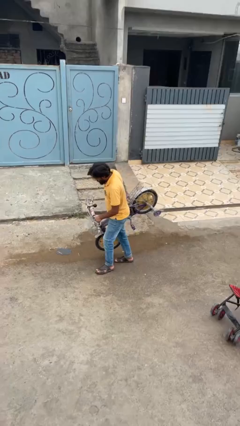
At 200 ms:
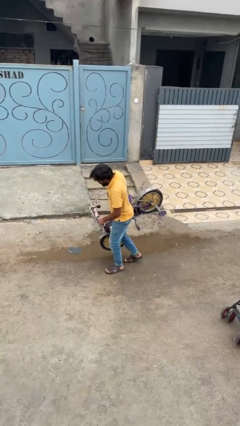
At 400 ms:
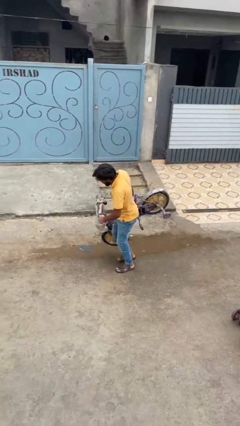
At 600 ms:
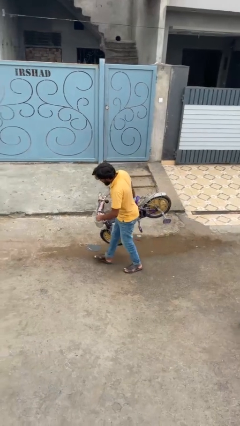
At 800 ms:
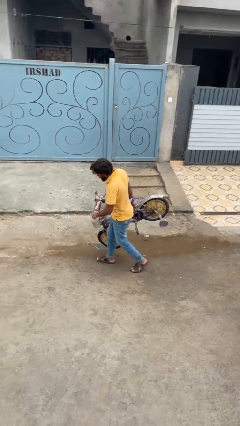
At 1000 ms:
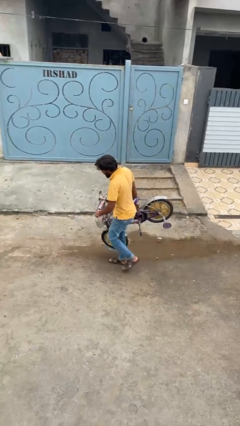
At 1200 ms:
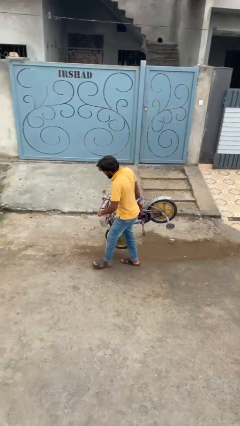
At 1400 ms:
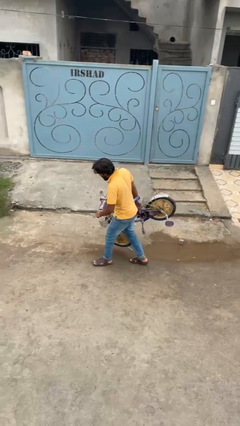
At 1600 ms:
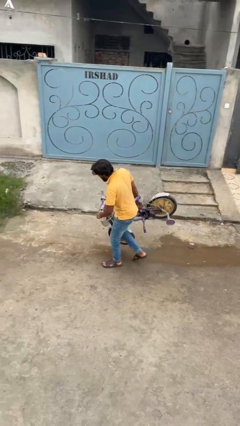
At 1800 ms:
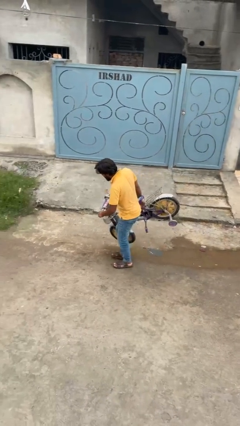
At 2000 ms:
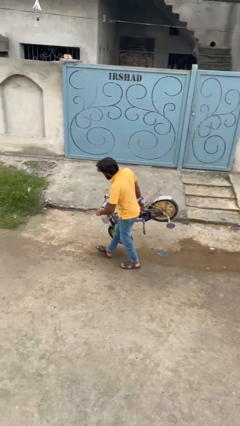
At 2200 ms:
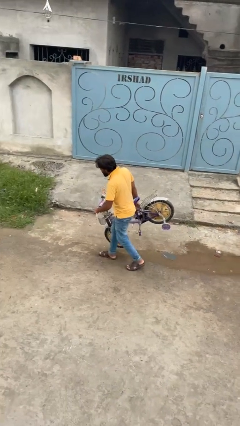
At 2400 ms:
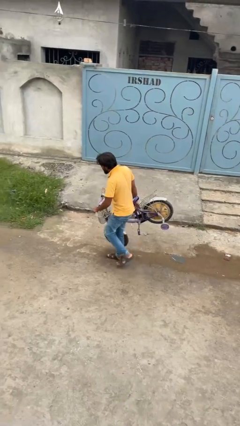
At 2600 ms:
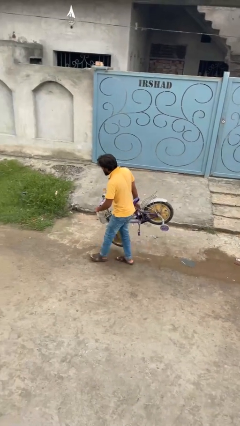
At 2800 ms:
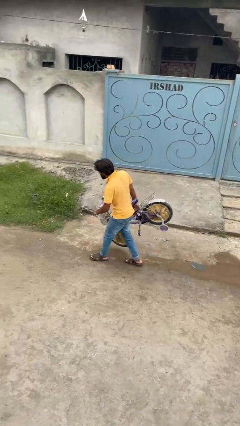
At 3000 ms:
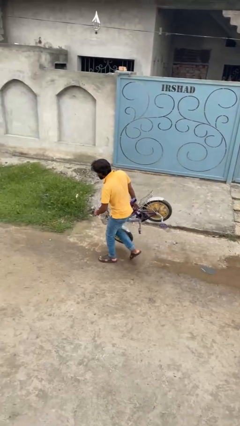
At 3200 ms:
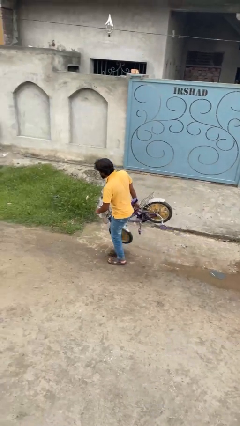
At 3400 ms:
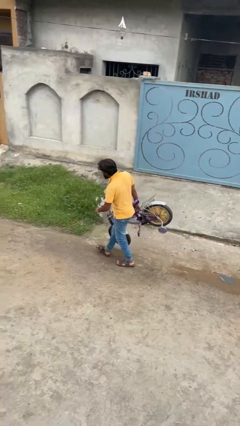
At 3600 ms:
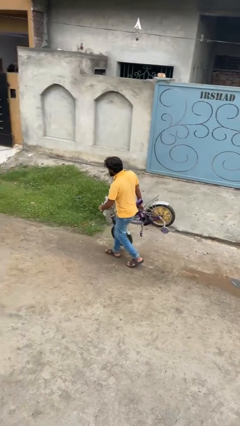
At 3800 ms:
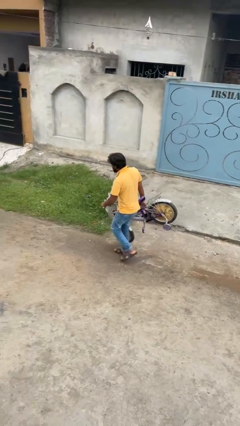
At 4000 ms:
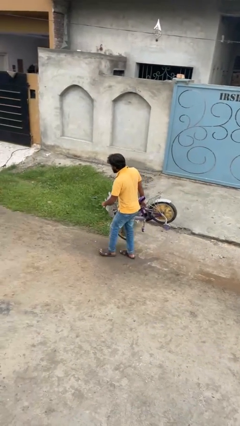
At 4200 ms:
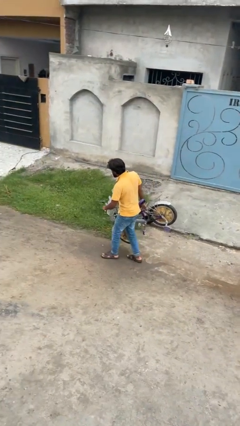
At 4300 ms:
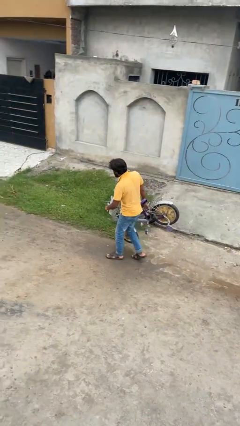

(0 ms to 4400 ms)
person carries bicycle

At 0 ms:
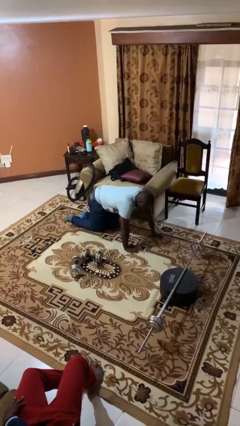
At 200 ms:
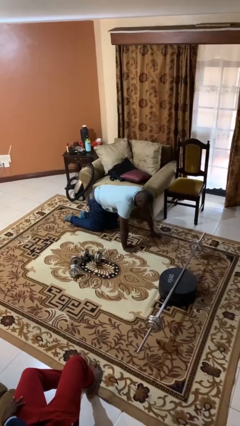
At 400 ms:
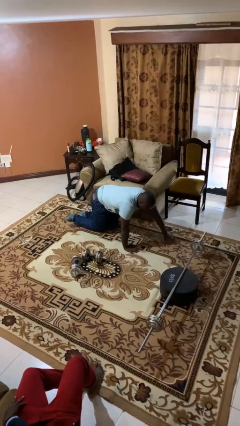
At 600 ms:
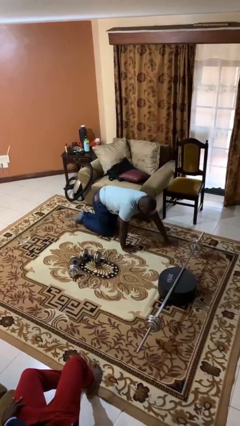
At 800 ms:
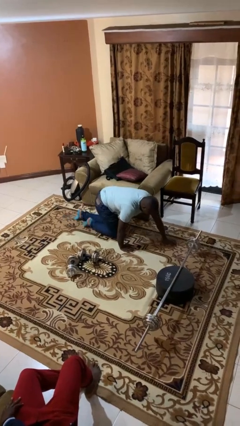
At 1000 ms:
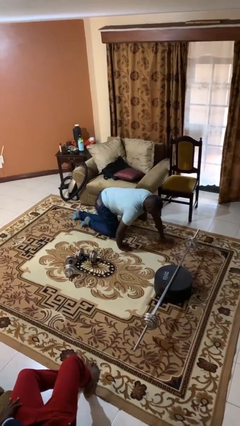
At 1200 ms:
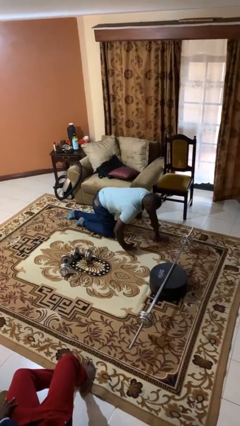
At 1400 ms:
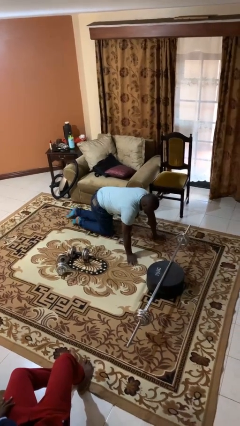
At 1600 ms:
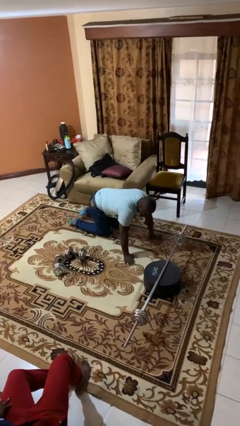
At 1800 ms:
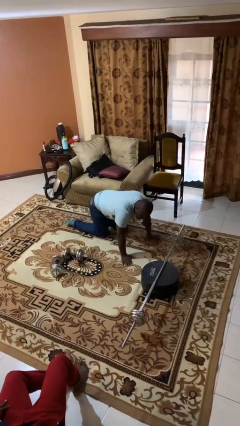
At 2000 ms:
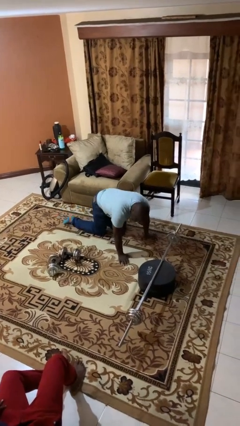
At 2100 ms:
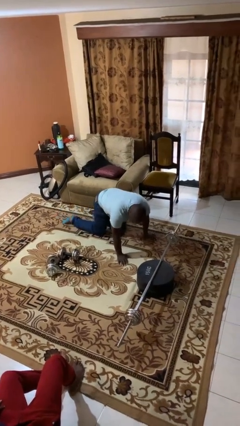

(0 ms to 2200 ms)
person crawls

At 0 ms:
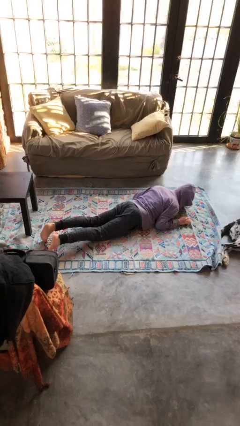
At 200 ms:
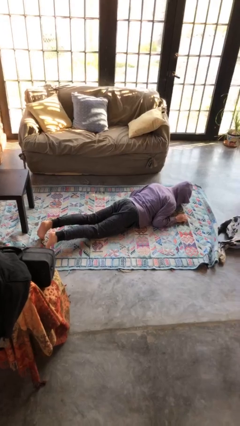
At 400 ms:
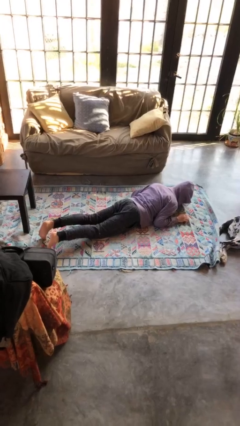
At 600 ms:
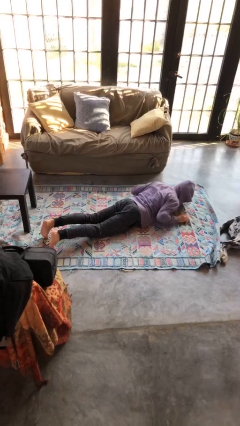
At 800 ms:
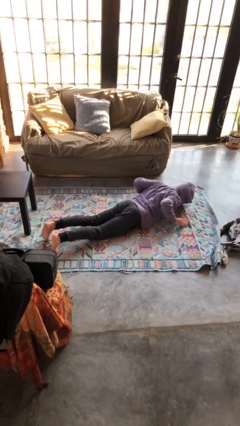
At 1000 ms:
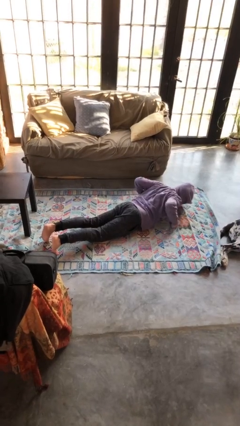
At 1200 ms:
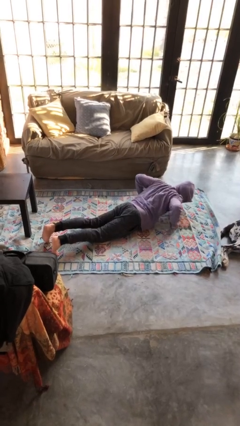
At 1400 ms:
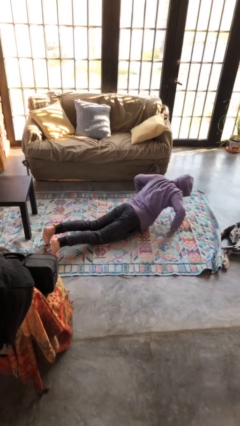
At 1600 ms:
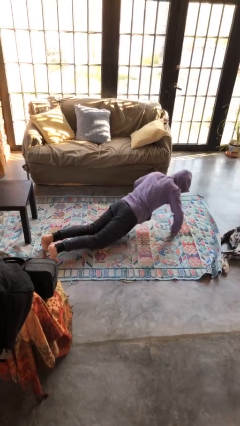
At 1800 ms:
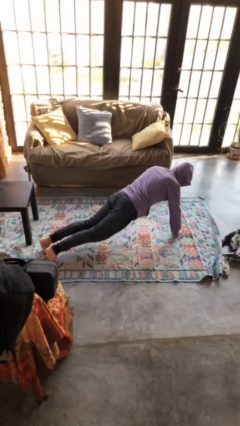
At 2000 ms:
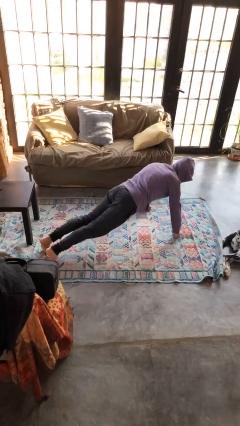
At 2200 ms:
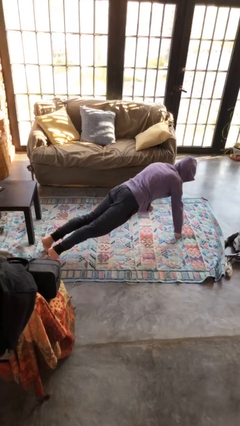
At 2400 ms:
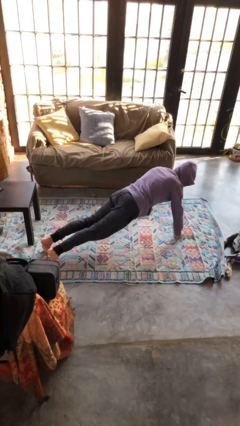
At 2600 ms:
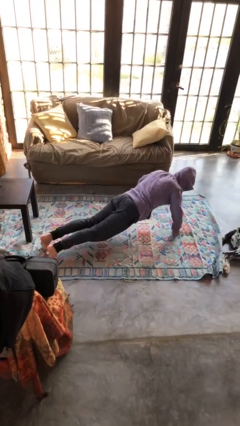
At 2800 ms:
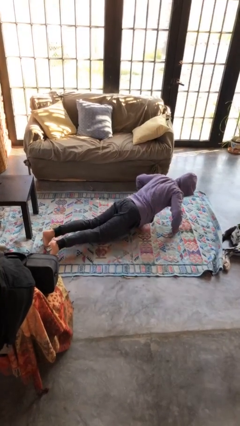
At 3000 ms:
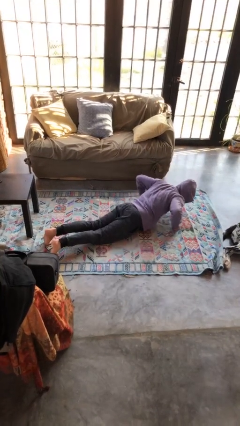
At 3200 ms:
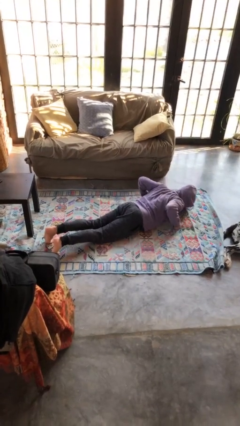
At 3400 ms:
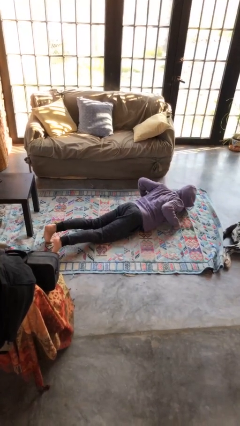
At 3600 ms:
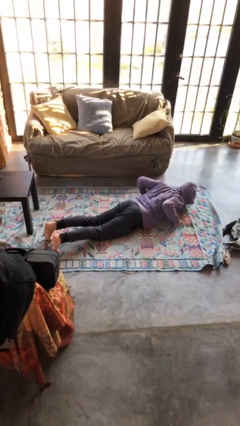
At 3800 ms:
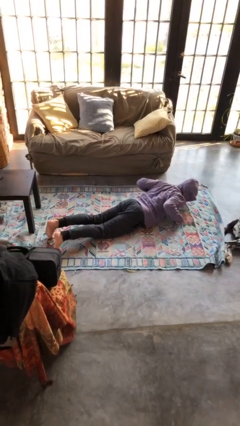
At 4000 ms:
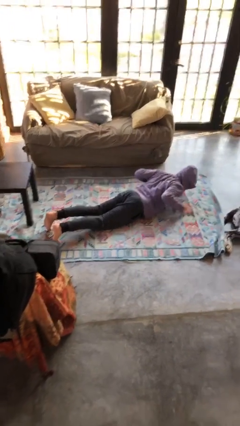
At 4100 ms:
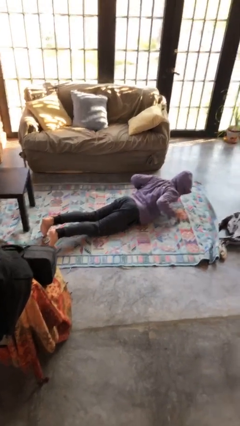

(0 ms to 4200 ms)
person exercises with pushup

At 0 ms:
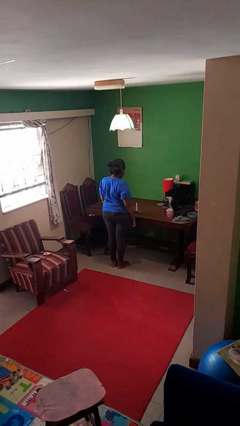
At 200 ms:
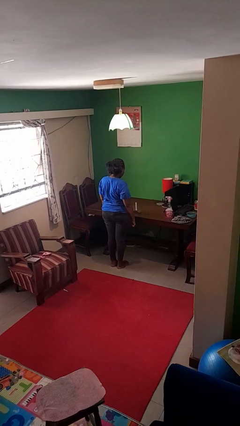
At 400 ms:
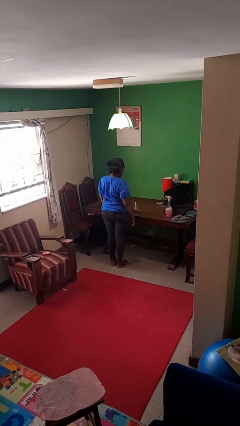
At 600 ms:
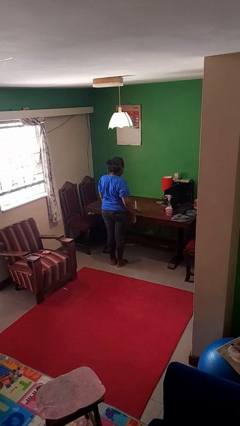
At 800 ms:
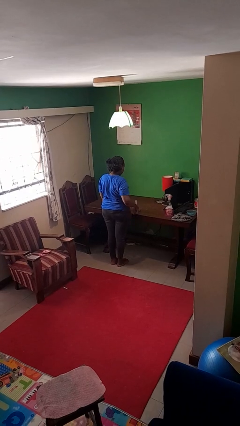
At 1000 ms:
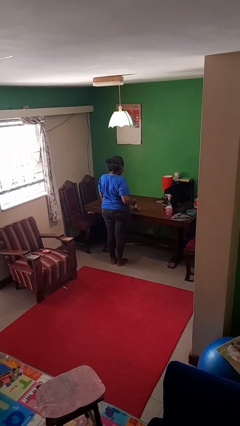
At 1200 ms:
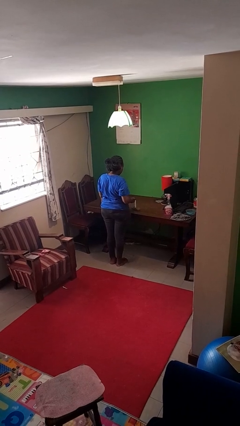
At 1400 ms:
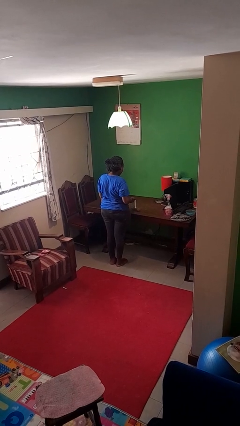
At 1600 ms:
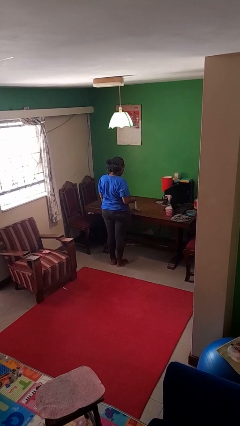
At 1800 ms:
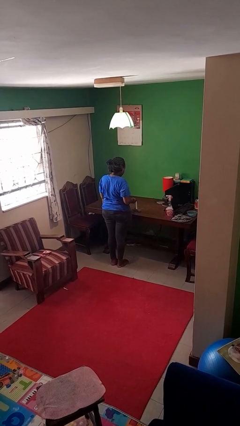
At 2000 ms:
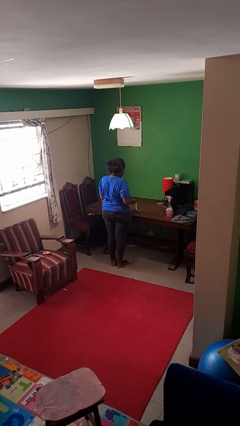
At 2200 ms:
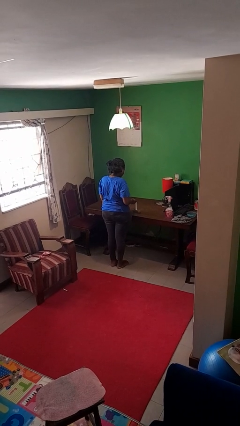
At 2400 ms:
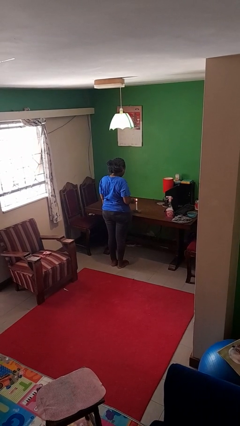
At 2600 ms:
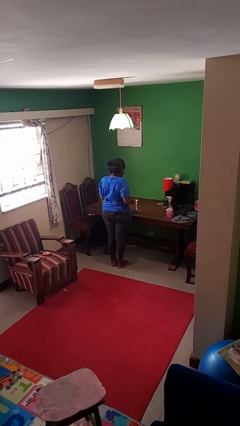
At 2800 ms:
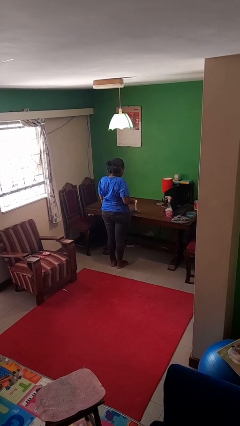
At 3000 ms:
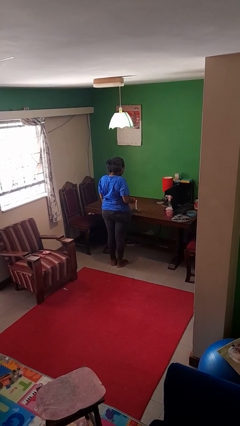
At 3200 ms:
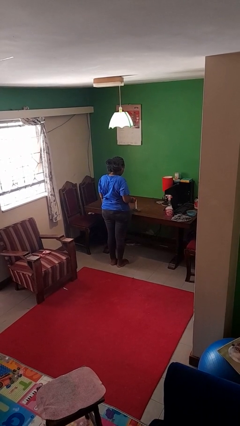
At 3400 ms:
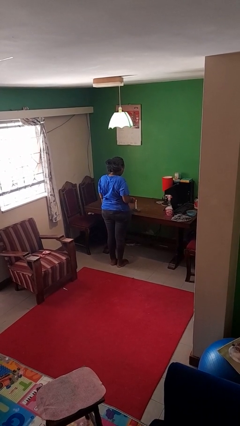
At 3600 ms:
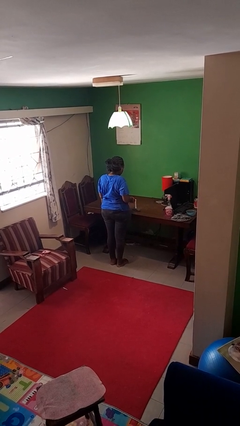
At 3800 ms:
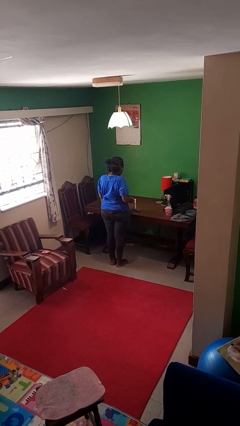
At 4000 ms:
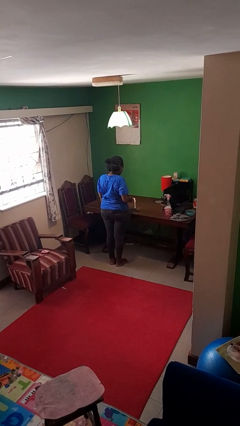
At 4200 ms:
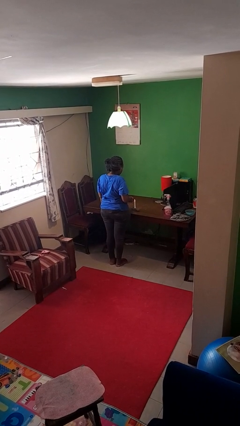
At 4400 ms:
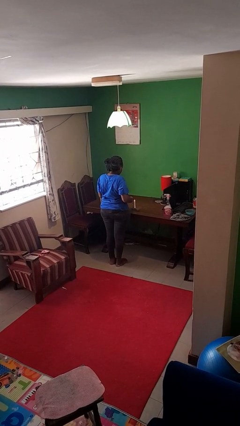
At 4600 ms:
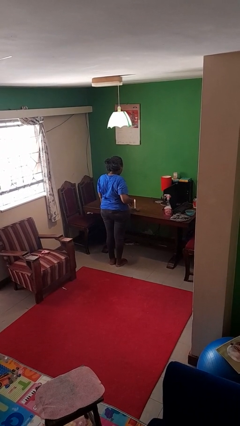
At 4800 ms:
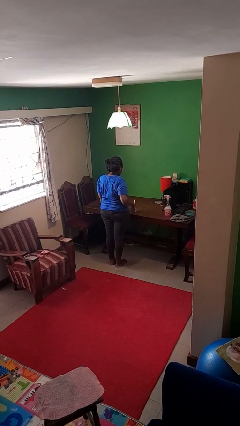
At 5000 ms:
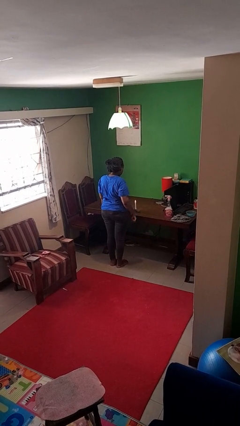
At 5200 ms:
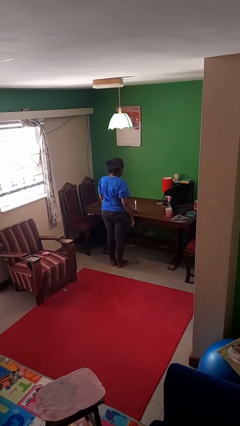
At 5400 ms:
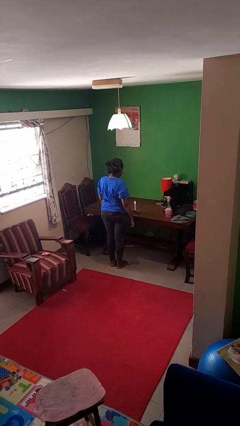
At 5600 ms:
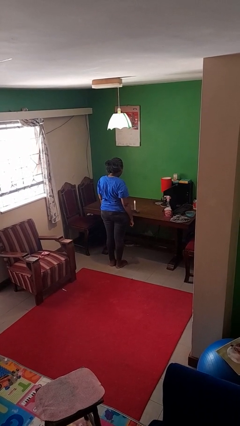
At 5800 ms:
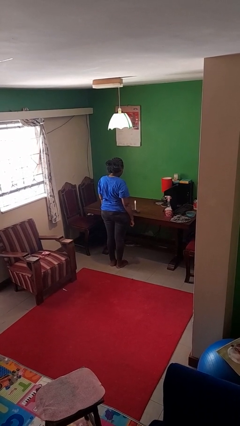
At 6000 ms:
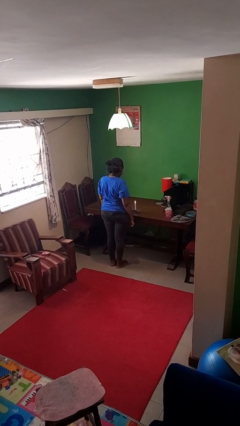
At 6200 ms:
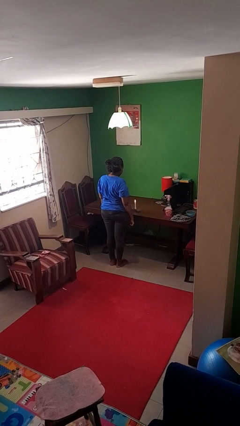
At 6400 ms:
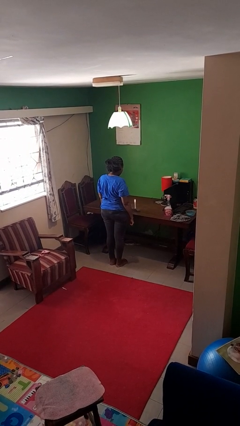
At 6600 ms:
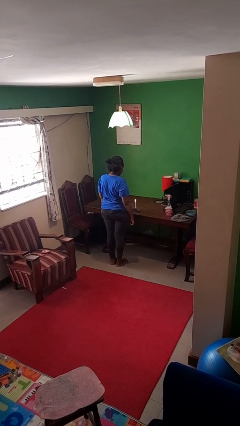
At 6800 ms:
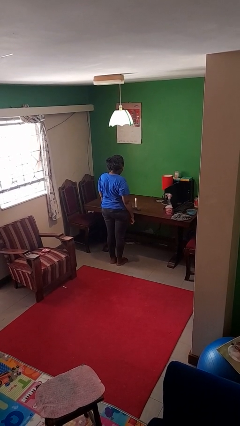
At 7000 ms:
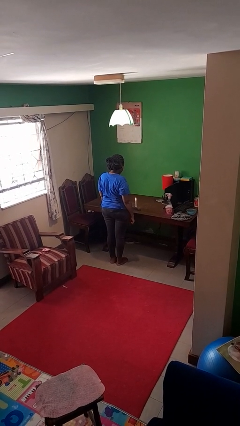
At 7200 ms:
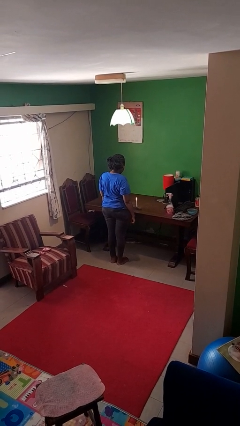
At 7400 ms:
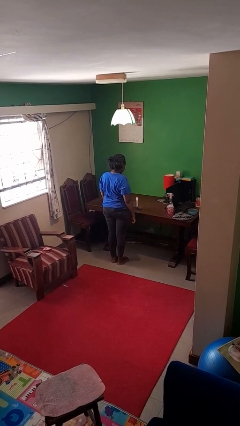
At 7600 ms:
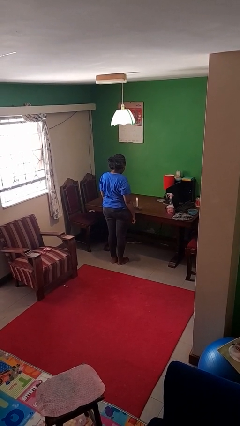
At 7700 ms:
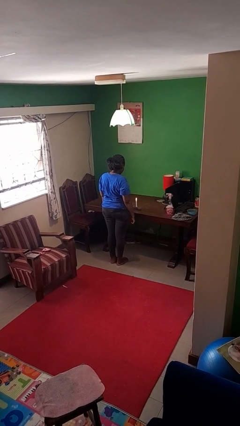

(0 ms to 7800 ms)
person lights candle
